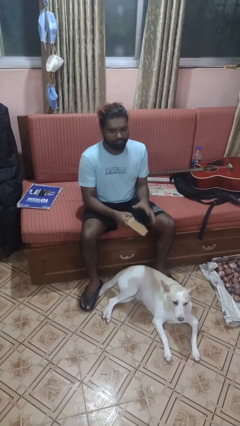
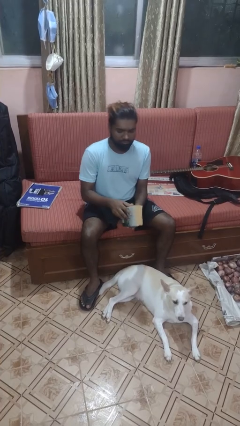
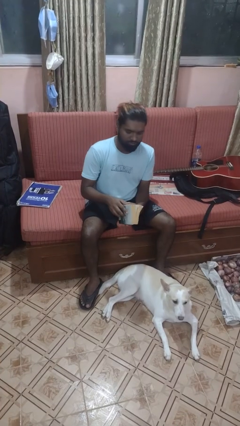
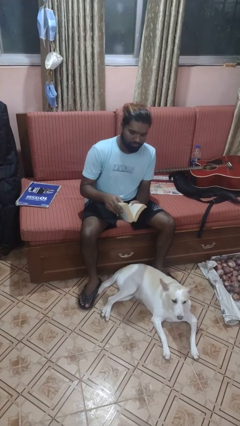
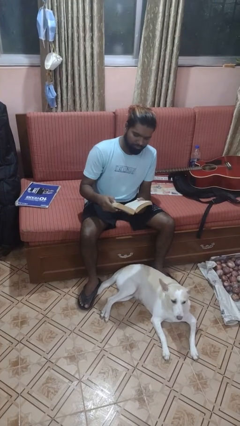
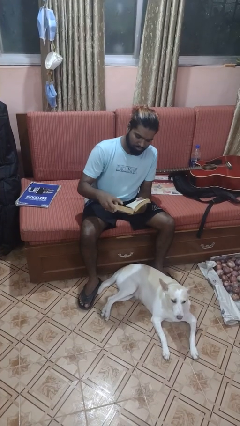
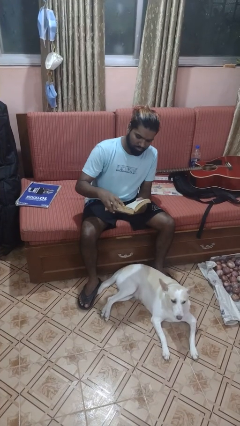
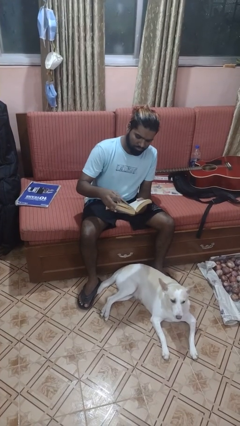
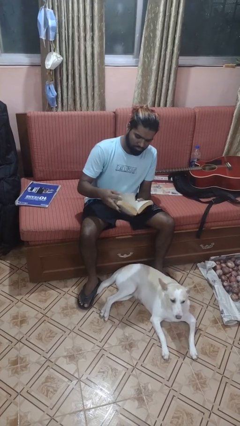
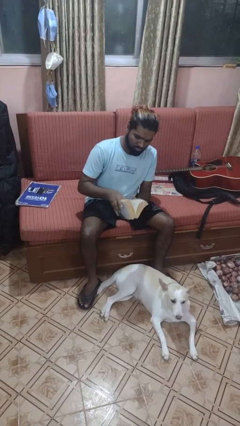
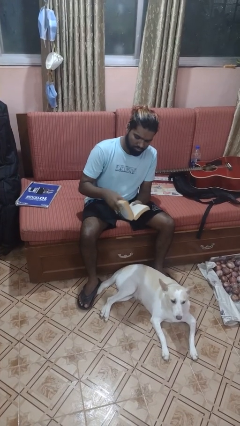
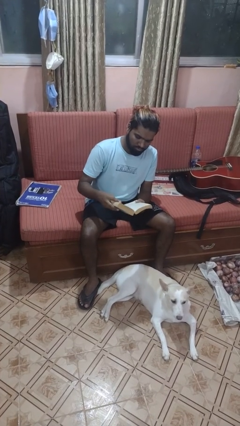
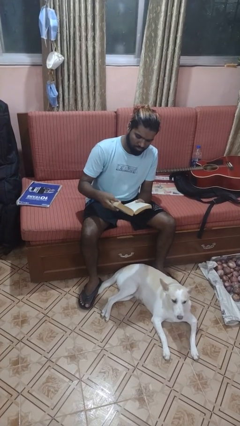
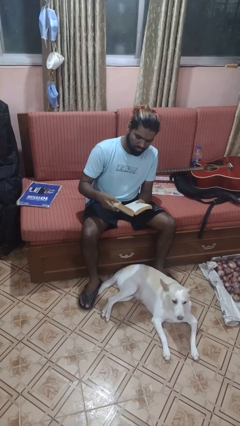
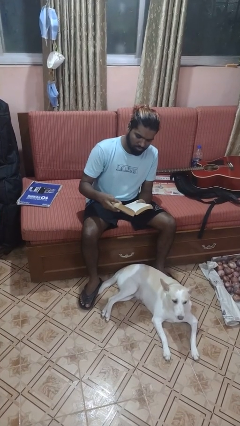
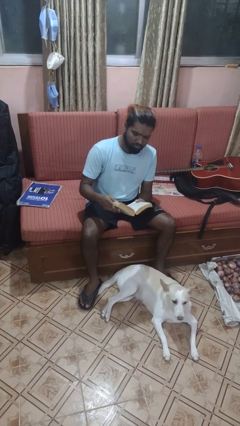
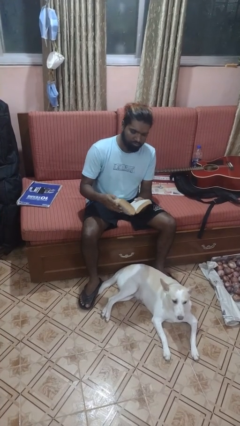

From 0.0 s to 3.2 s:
person reads book

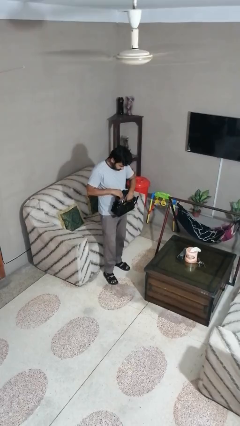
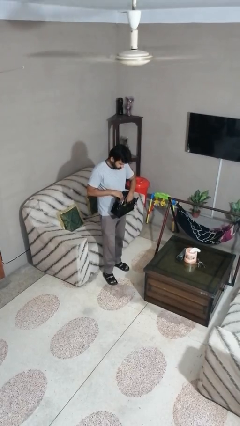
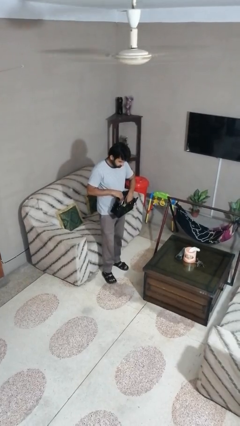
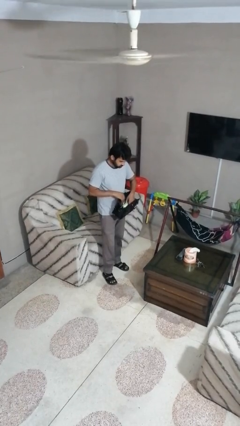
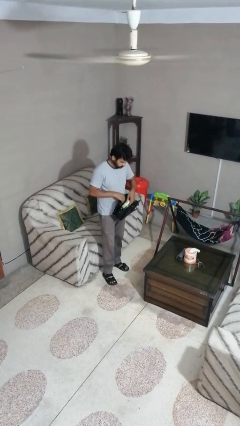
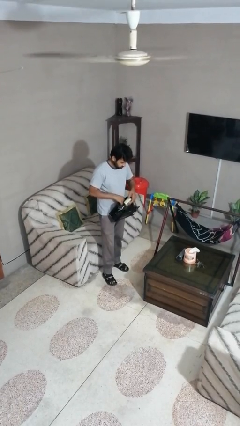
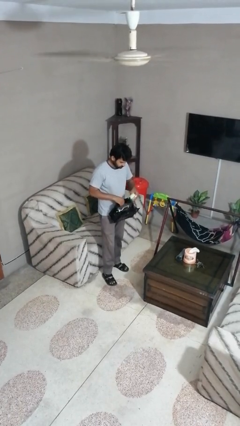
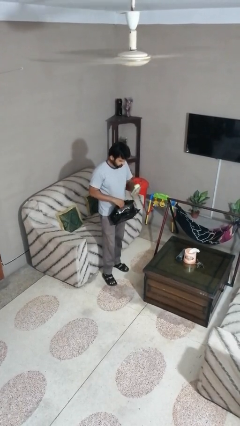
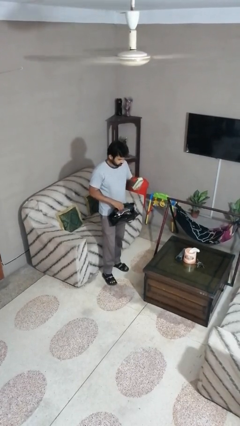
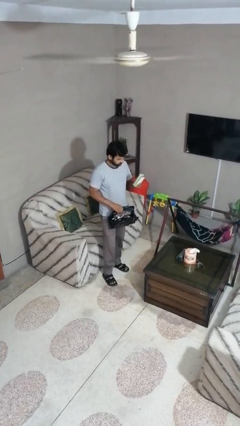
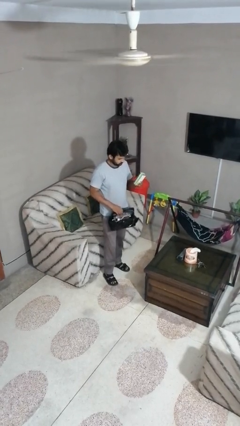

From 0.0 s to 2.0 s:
person takes object from purse

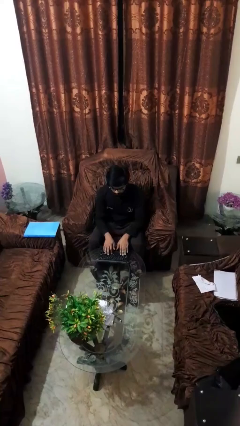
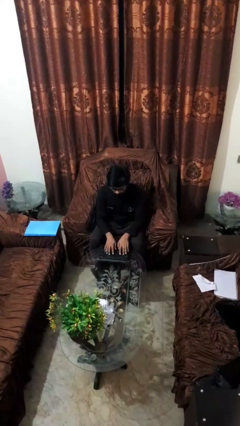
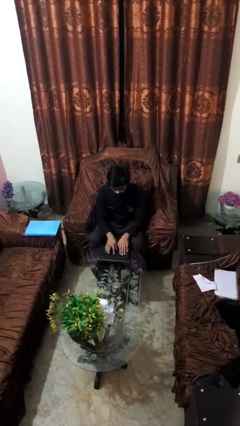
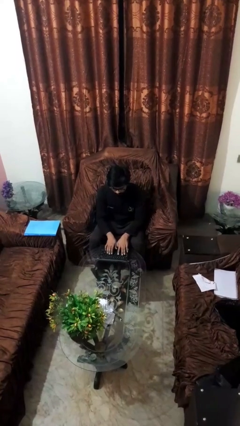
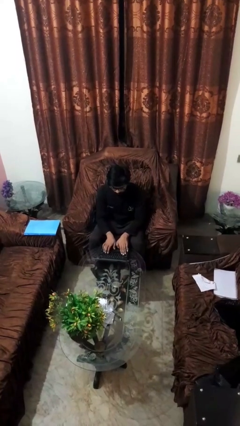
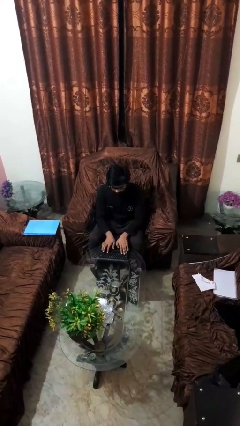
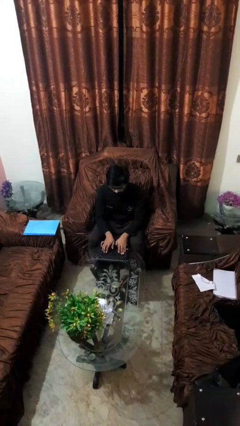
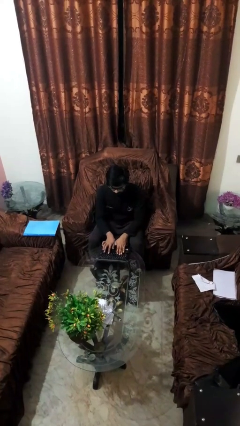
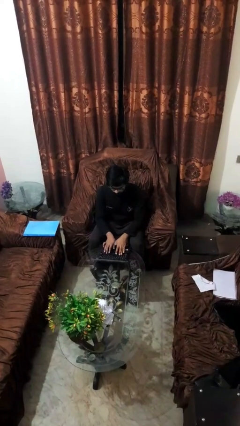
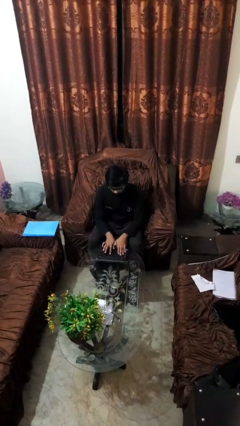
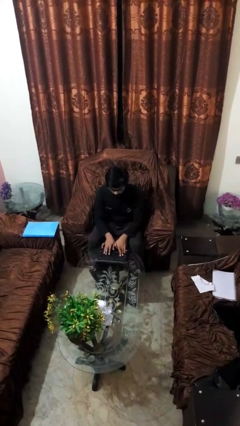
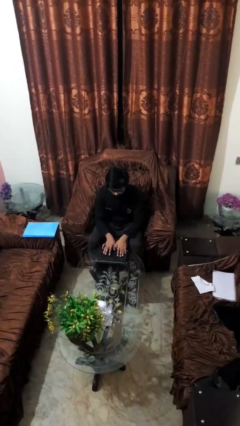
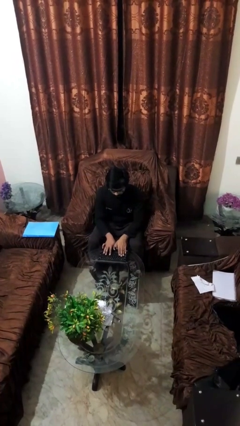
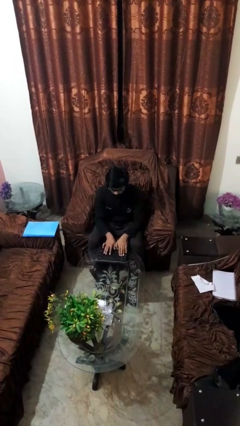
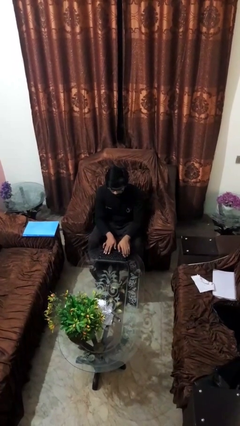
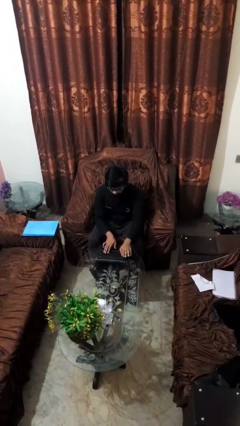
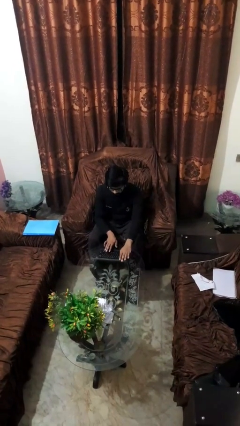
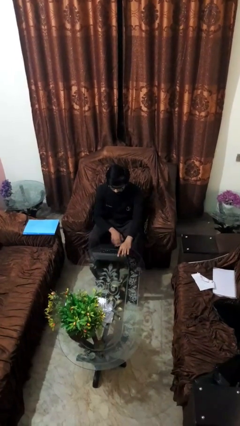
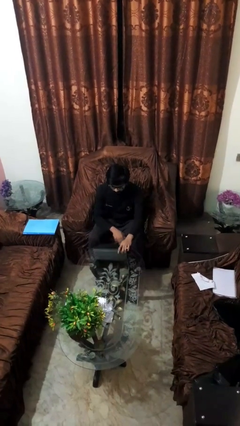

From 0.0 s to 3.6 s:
person interacts with laptop

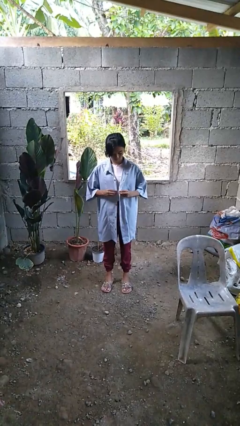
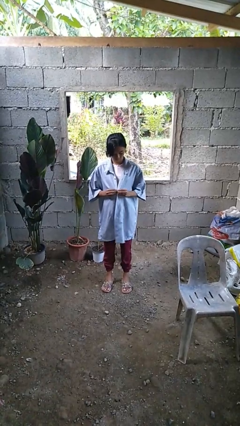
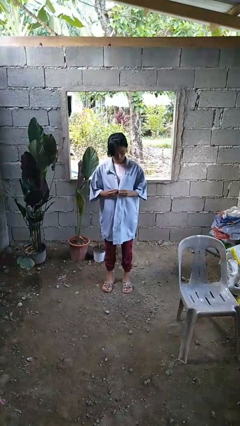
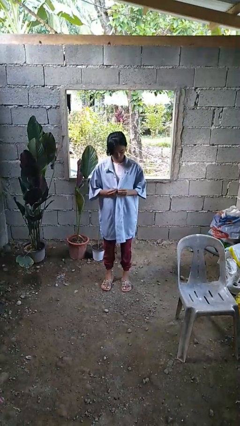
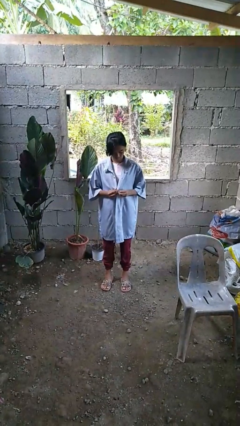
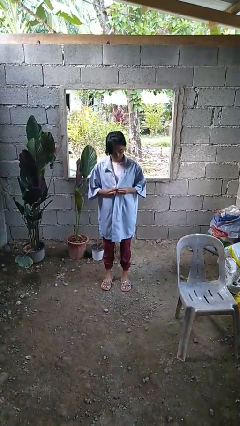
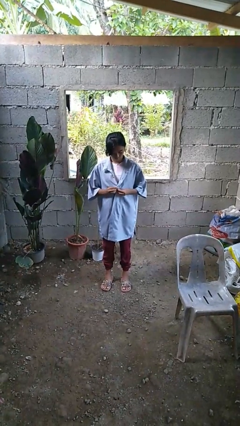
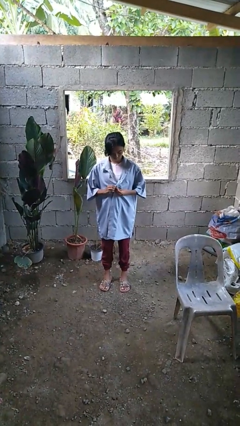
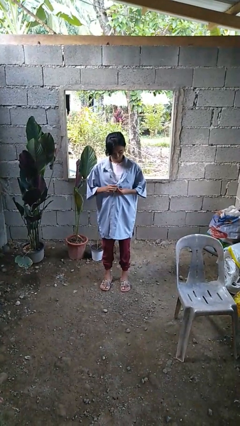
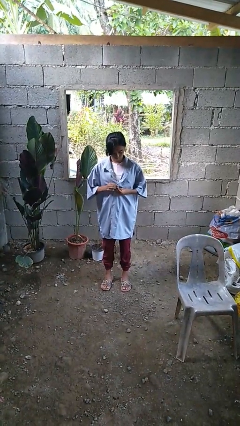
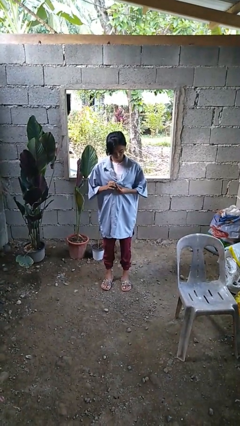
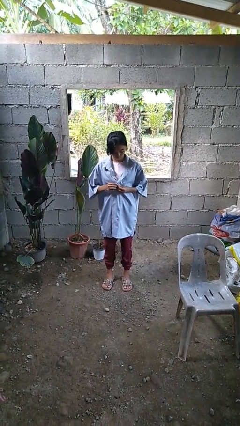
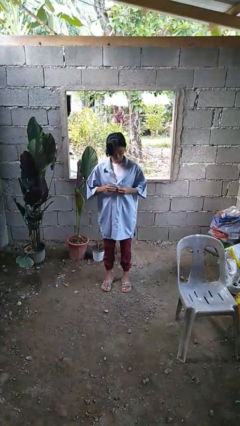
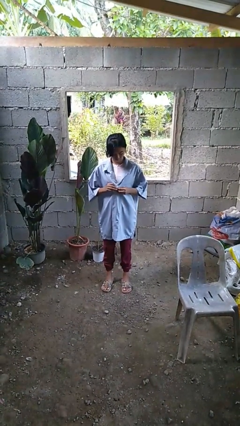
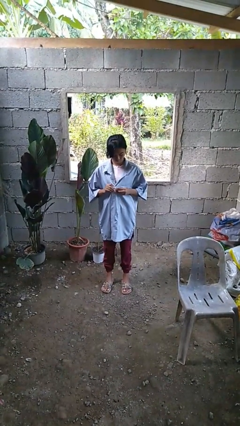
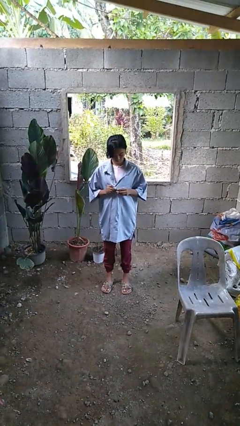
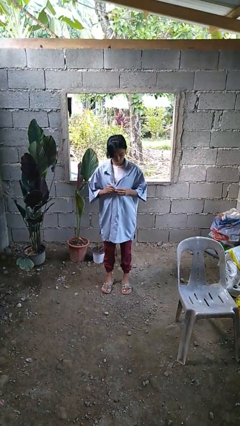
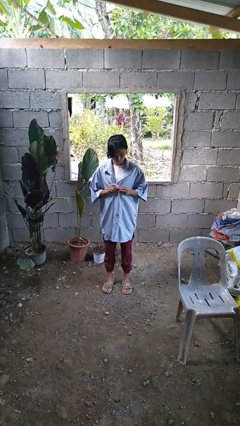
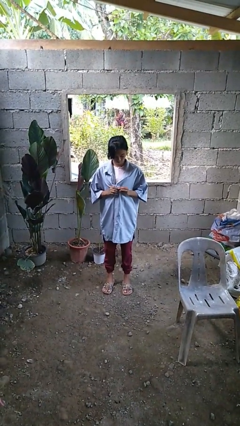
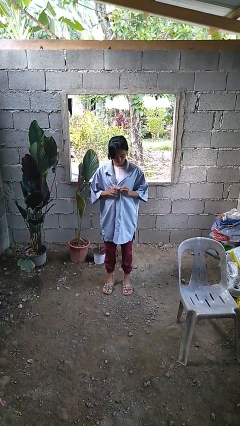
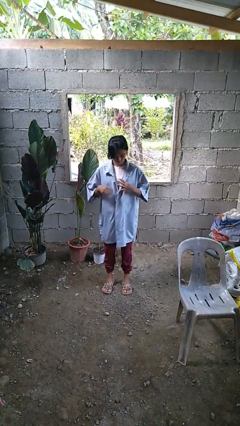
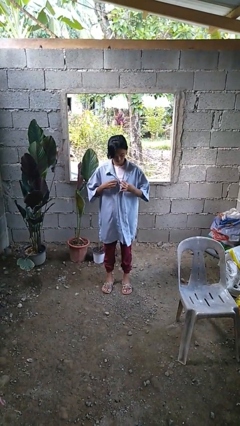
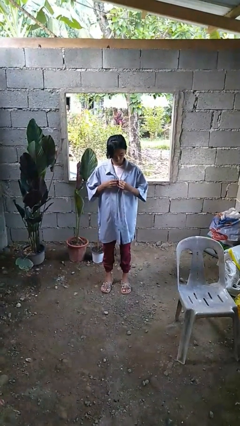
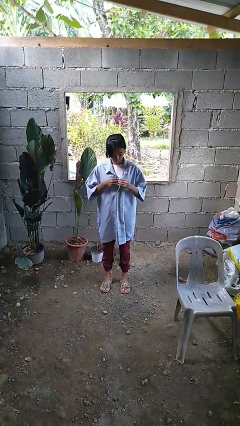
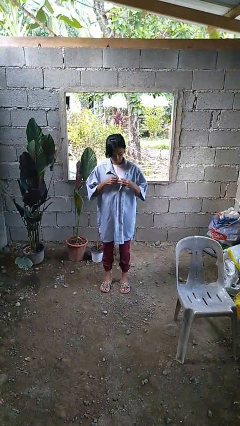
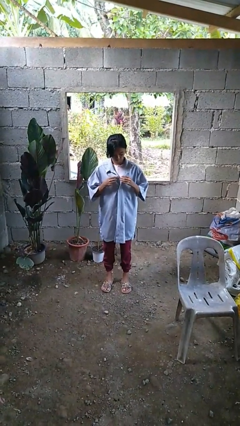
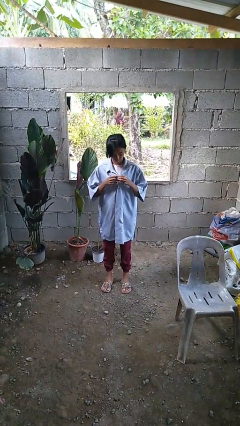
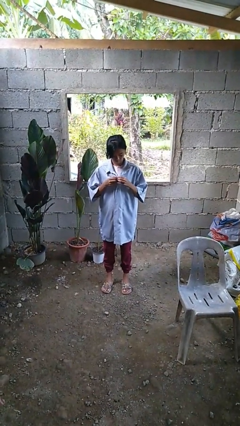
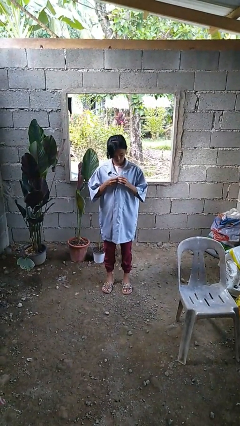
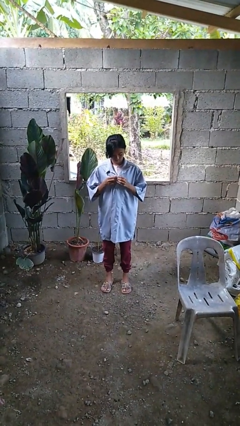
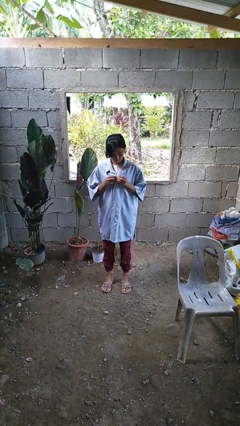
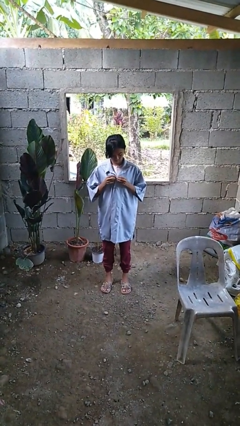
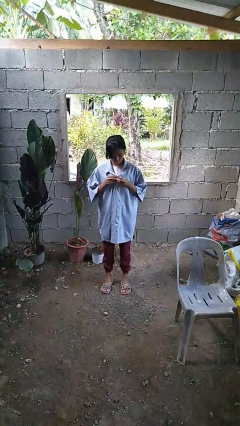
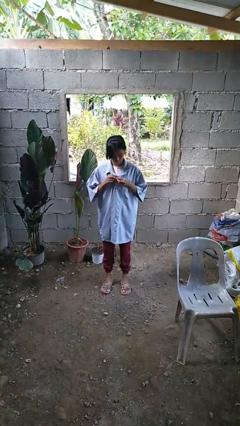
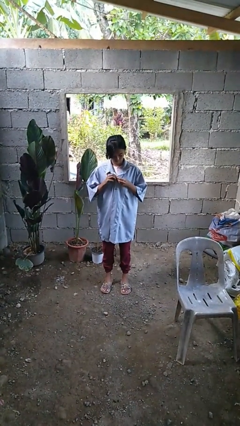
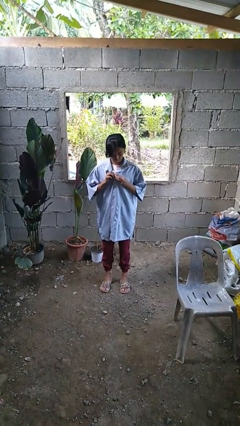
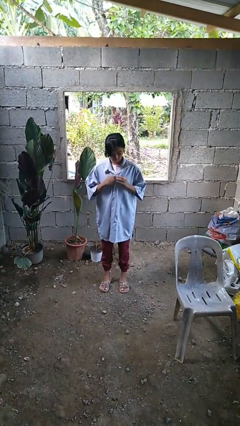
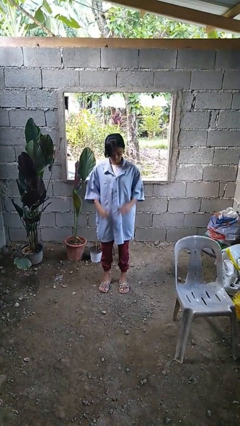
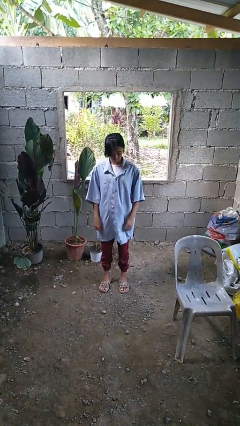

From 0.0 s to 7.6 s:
person buttons shirt

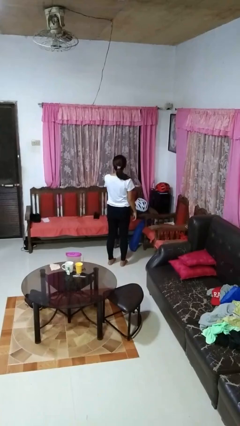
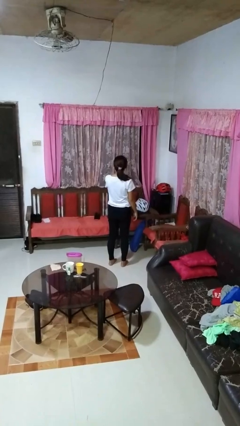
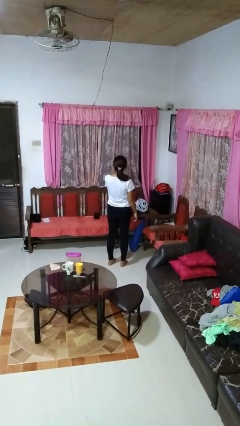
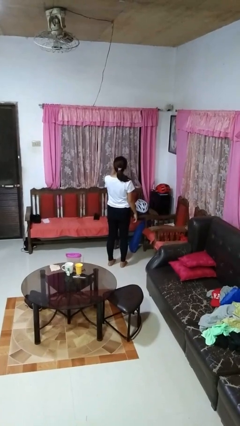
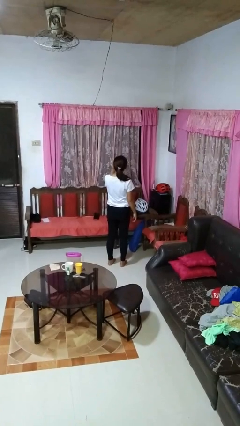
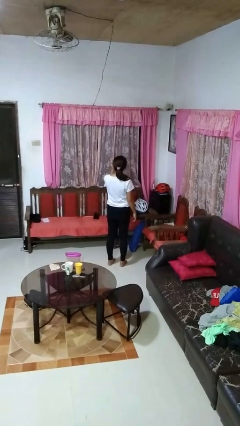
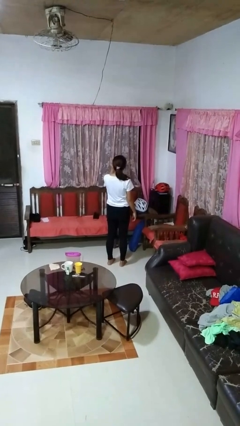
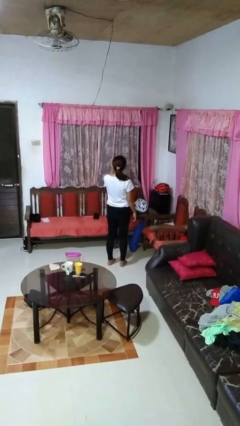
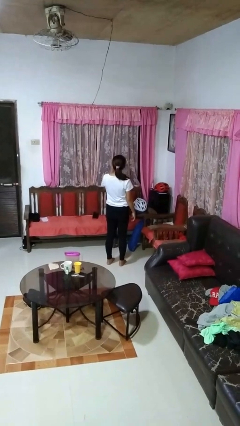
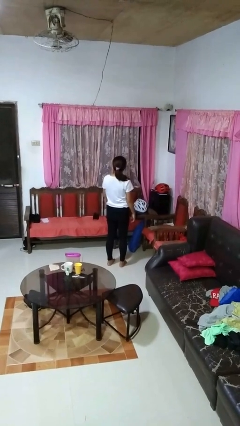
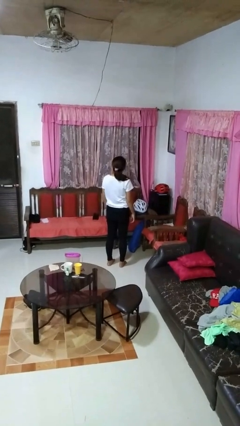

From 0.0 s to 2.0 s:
person gestures blow kiss
